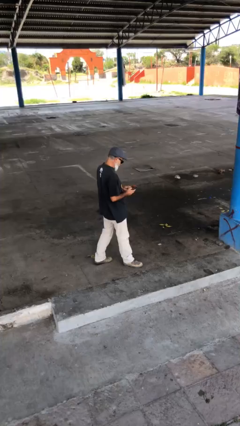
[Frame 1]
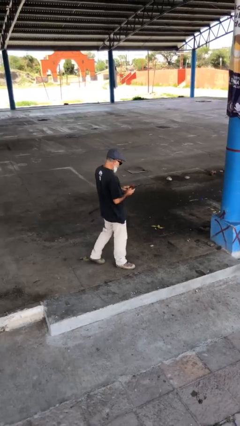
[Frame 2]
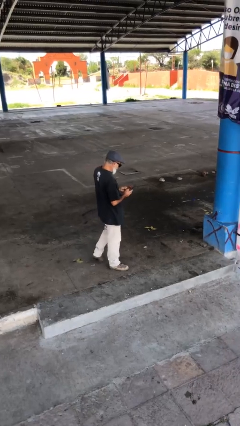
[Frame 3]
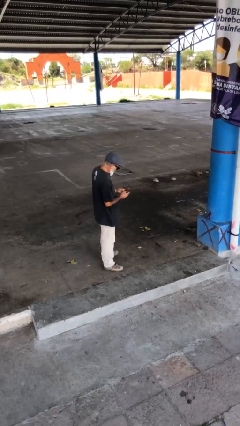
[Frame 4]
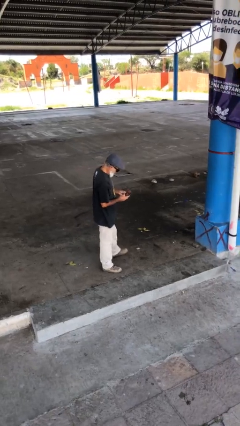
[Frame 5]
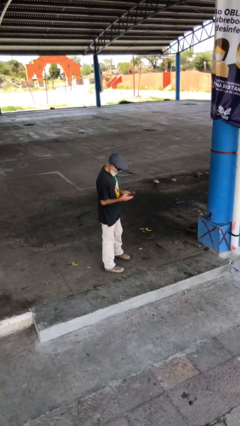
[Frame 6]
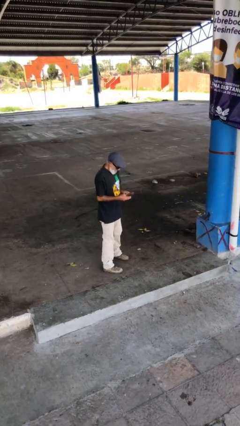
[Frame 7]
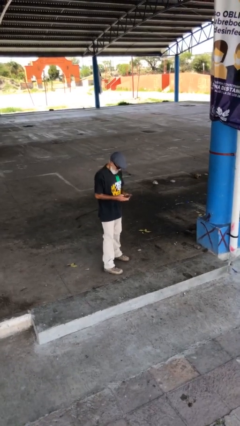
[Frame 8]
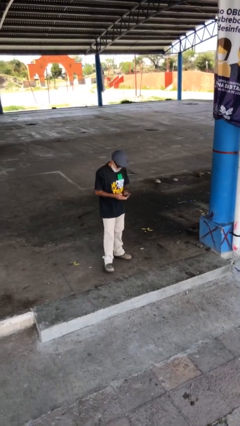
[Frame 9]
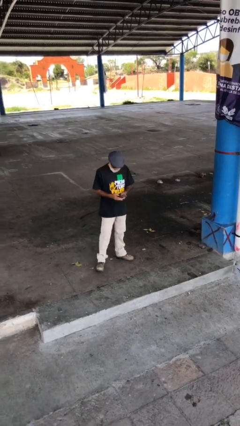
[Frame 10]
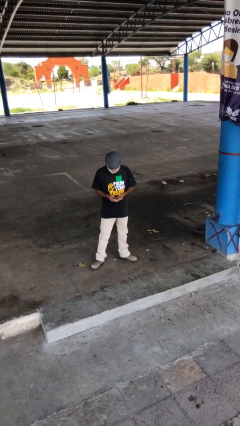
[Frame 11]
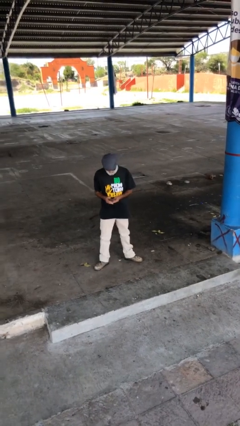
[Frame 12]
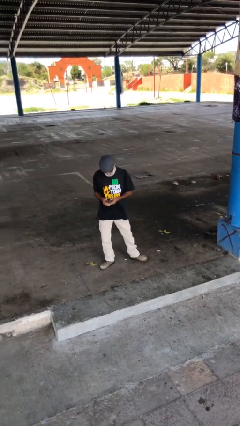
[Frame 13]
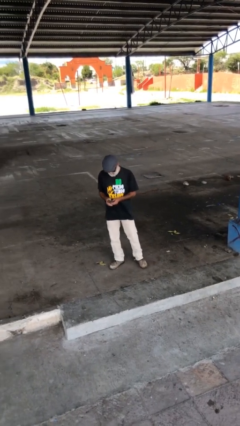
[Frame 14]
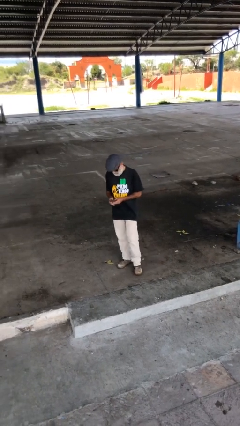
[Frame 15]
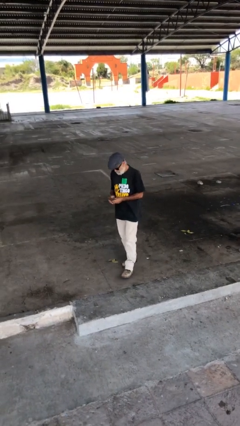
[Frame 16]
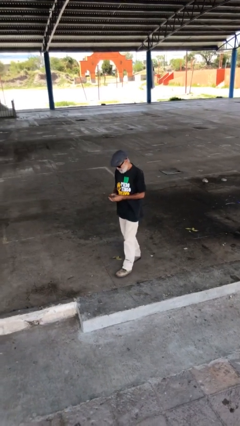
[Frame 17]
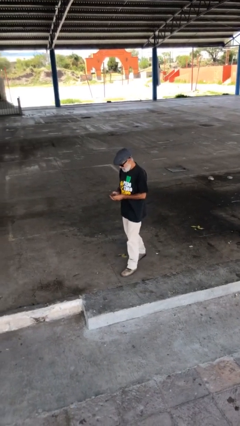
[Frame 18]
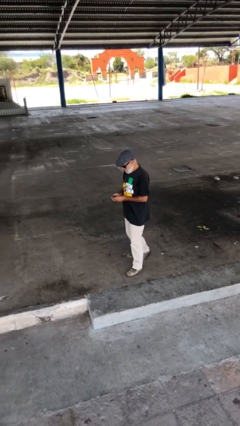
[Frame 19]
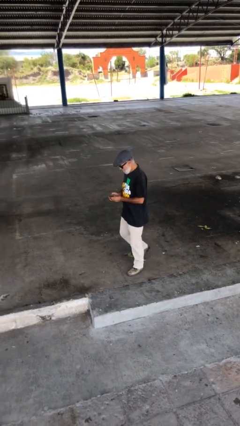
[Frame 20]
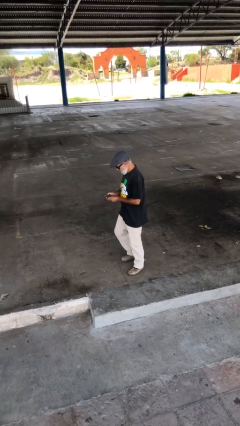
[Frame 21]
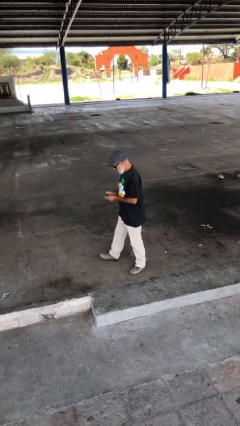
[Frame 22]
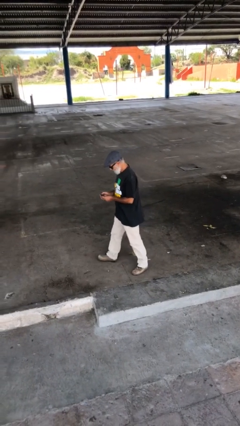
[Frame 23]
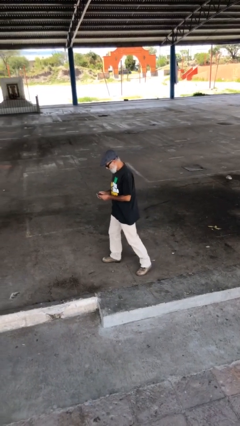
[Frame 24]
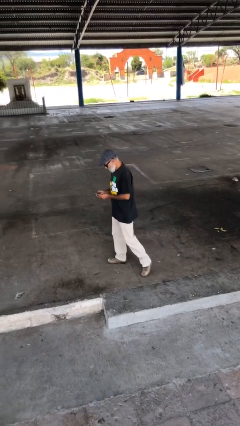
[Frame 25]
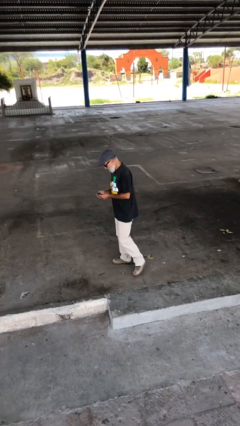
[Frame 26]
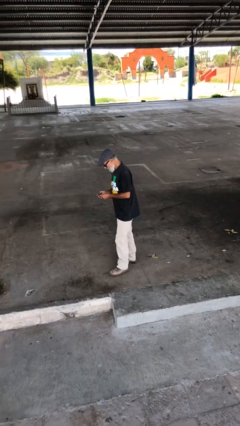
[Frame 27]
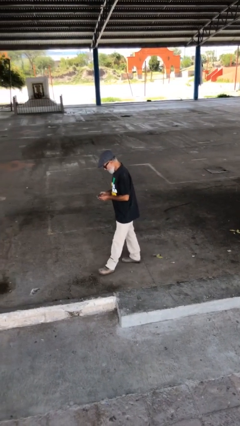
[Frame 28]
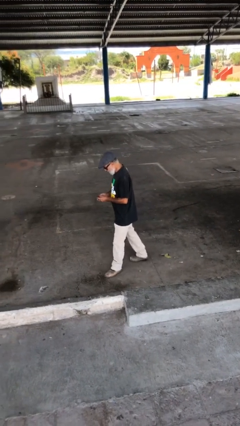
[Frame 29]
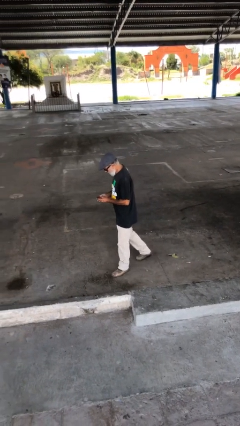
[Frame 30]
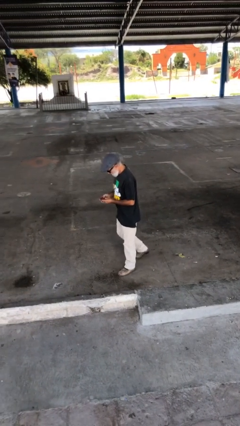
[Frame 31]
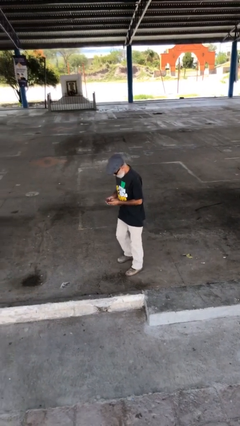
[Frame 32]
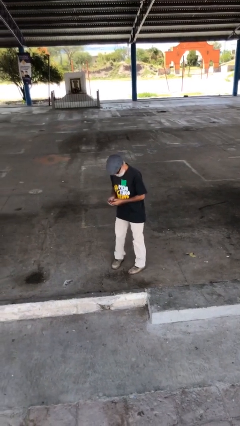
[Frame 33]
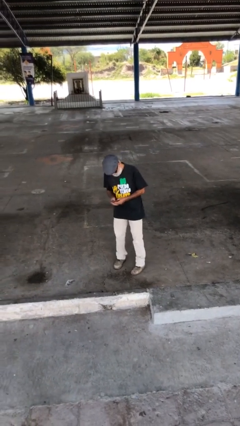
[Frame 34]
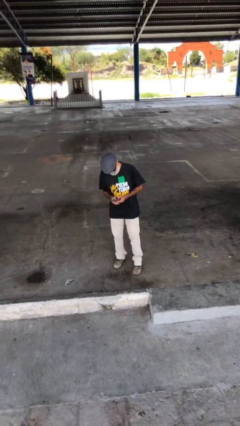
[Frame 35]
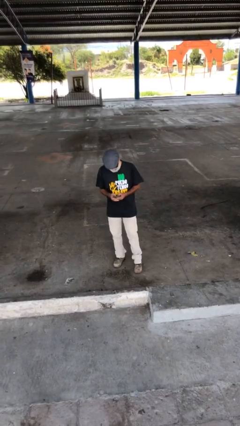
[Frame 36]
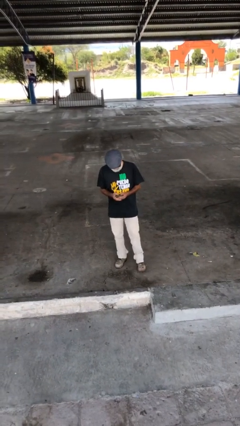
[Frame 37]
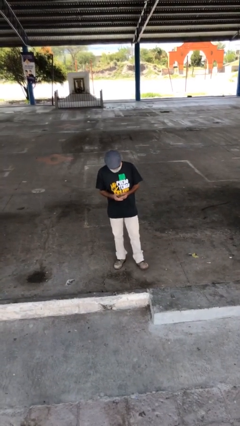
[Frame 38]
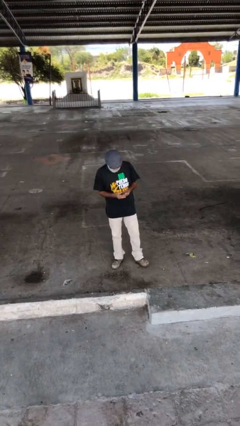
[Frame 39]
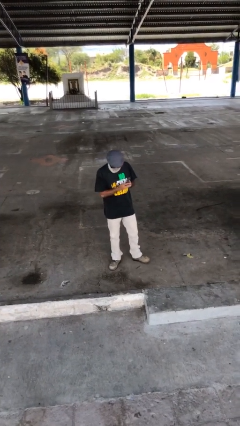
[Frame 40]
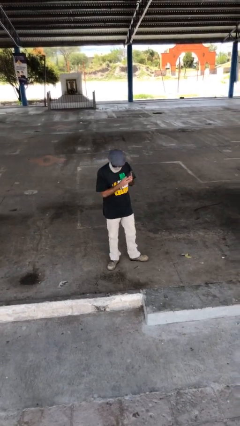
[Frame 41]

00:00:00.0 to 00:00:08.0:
person texts on phone

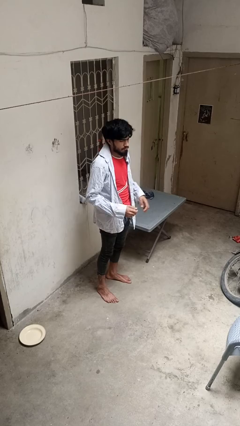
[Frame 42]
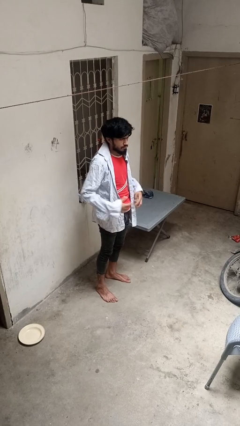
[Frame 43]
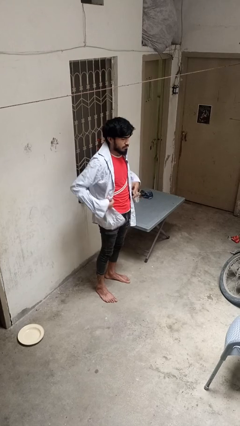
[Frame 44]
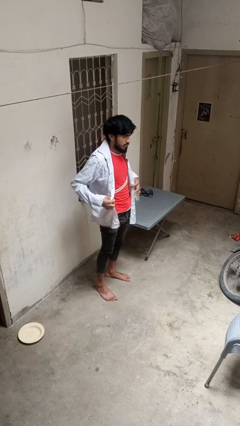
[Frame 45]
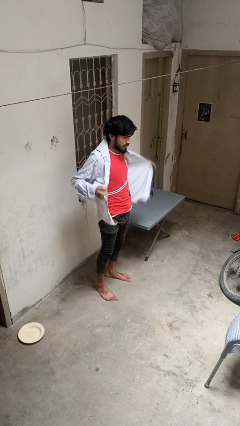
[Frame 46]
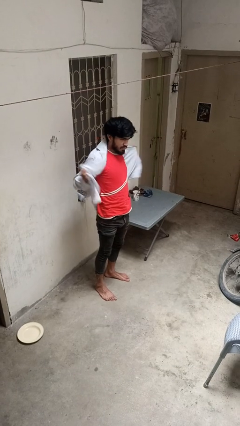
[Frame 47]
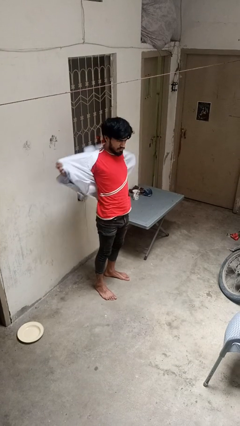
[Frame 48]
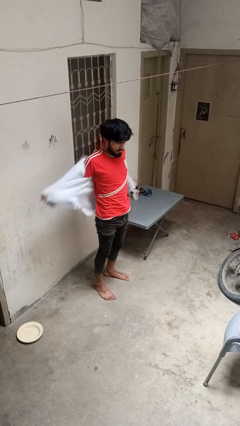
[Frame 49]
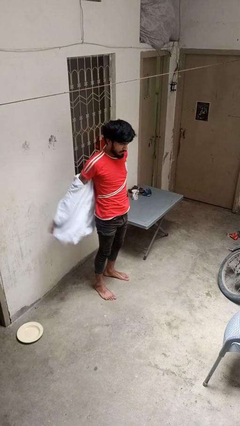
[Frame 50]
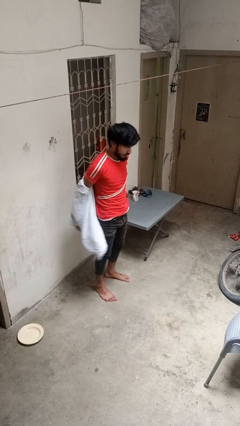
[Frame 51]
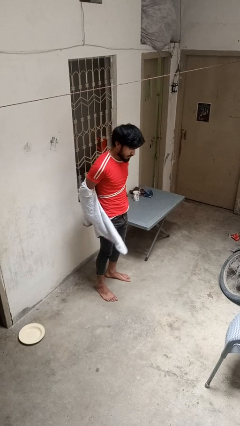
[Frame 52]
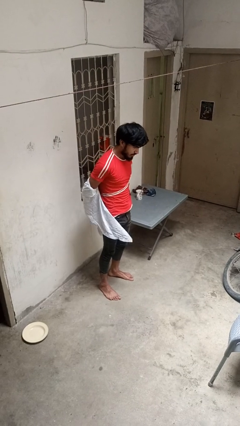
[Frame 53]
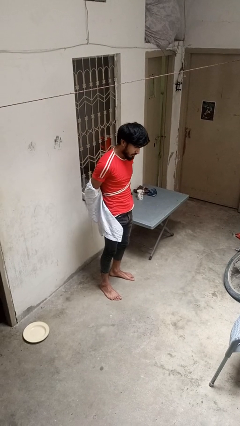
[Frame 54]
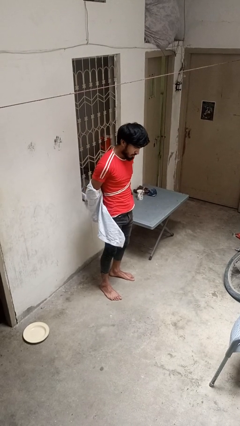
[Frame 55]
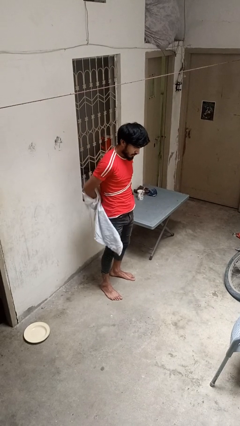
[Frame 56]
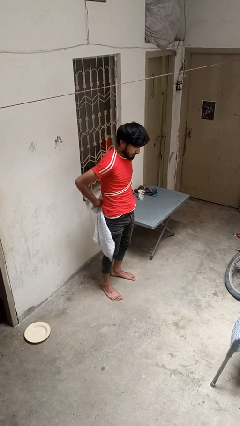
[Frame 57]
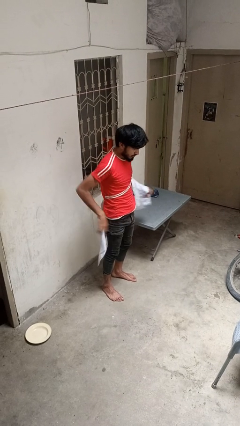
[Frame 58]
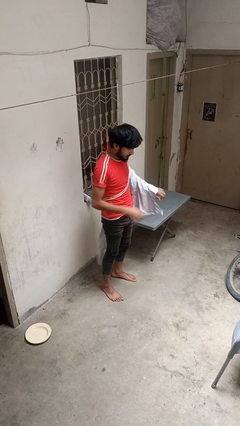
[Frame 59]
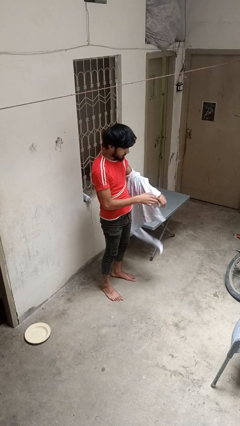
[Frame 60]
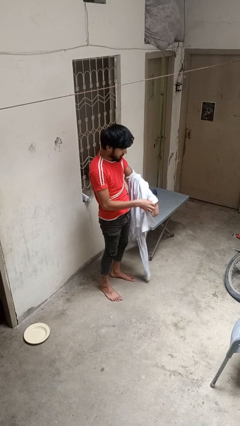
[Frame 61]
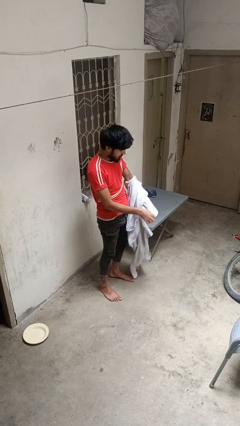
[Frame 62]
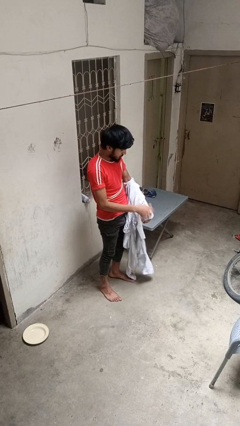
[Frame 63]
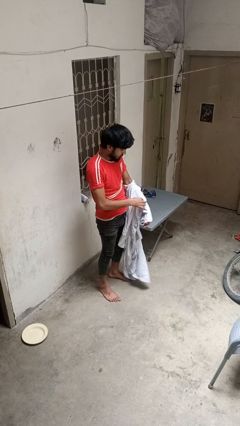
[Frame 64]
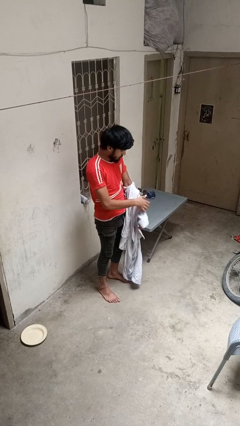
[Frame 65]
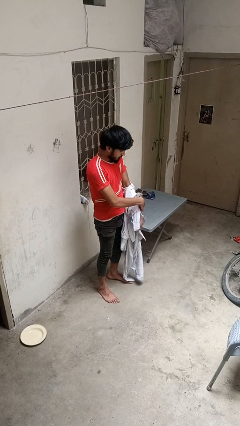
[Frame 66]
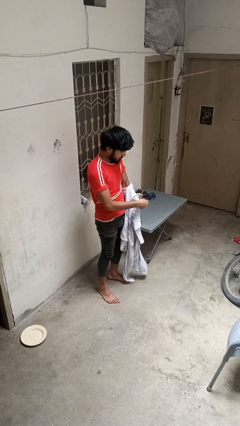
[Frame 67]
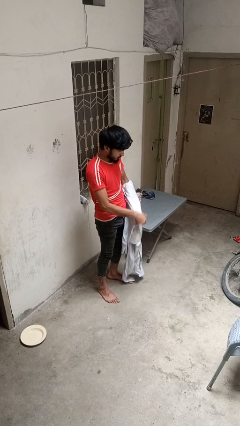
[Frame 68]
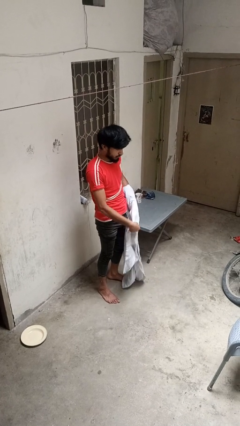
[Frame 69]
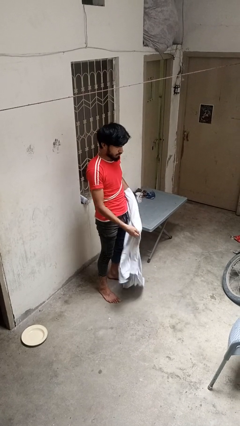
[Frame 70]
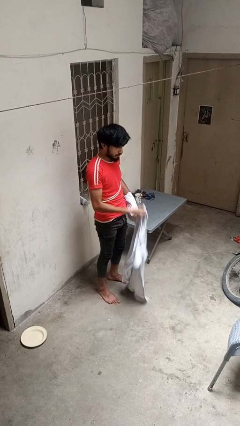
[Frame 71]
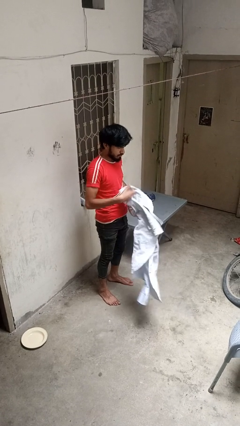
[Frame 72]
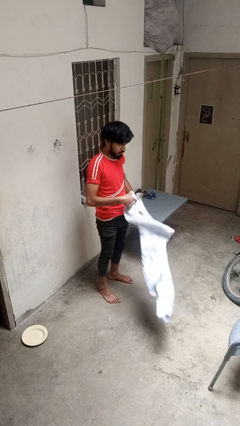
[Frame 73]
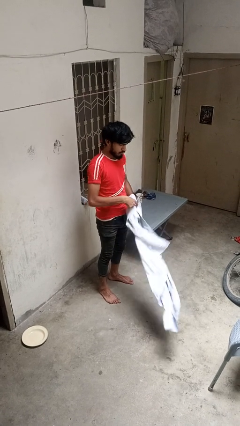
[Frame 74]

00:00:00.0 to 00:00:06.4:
person takes off shirt

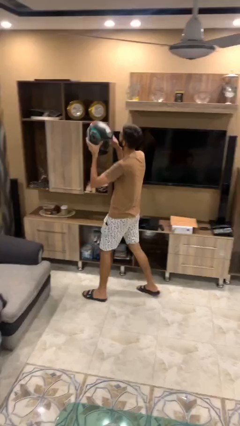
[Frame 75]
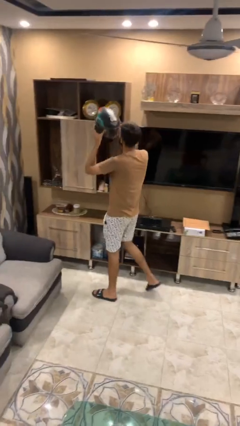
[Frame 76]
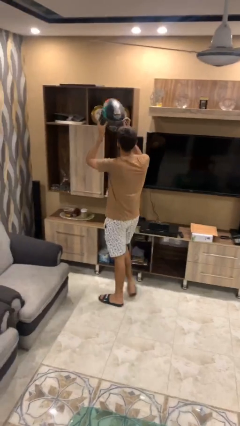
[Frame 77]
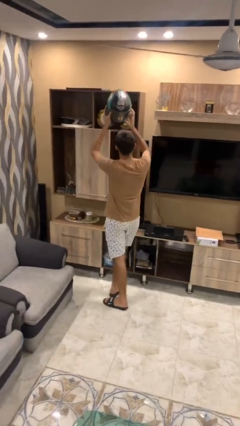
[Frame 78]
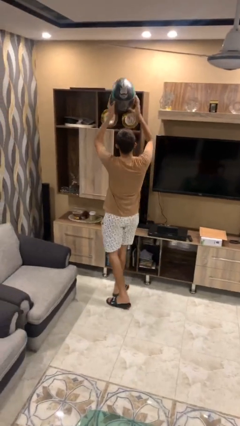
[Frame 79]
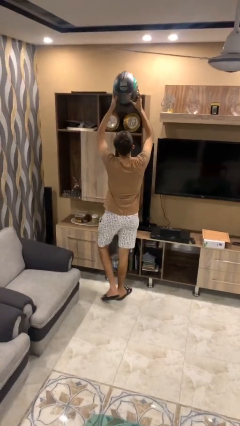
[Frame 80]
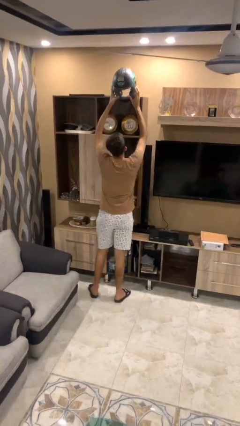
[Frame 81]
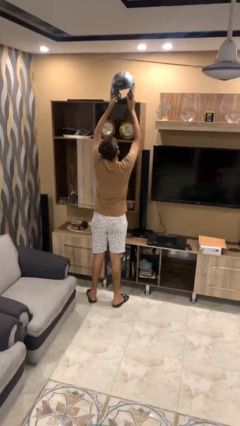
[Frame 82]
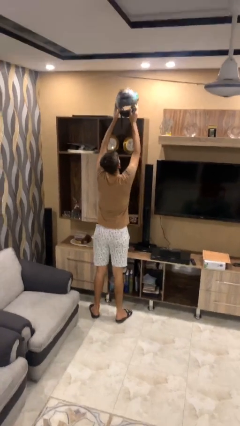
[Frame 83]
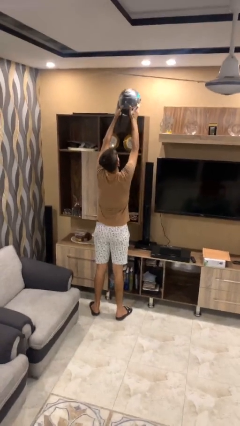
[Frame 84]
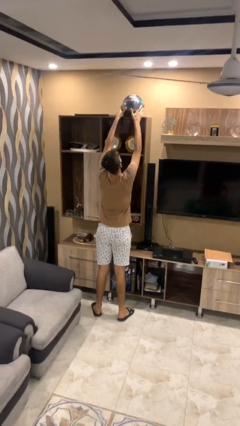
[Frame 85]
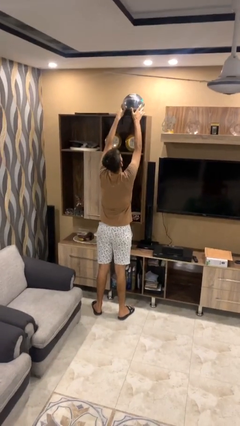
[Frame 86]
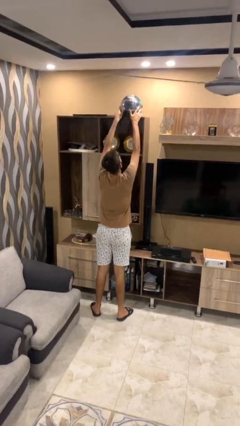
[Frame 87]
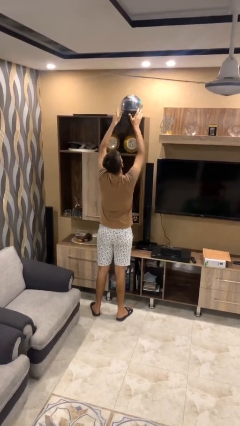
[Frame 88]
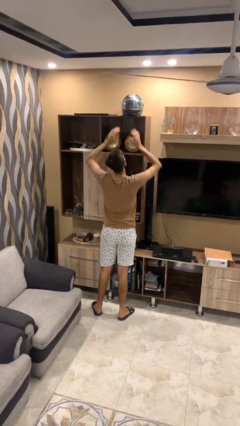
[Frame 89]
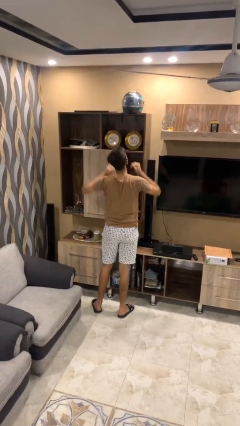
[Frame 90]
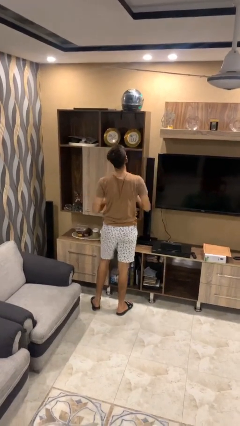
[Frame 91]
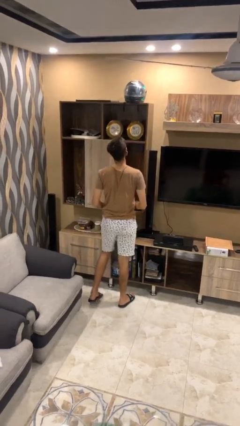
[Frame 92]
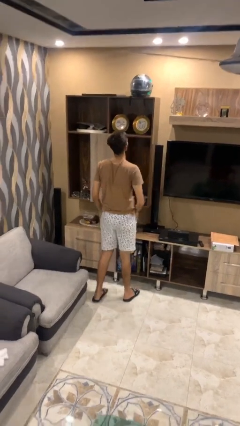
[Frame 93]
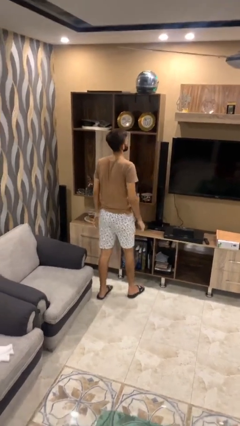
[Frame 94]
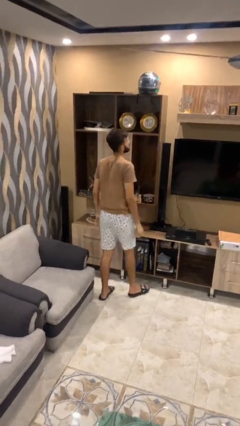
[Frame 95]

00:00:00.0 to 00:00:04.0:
person puts down object on shelf
